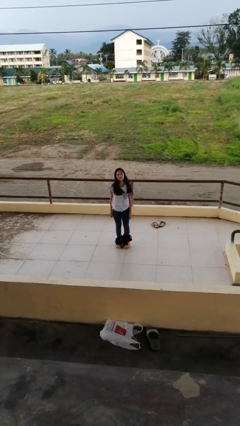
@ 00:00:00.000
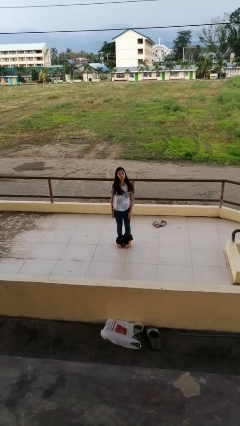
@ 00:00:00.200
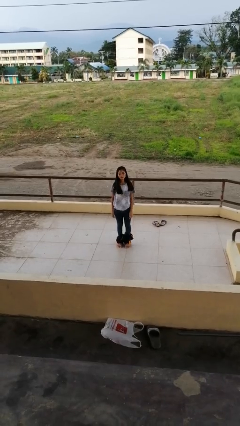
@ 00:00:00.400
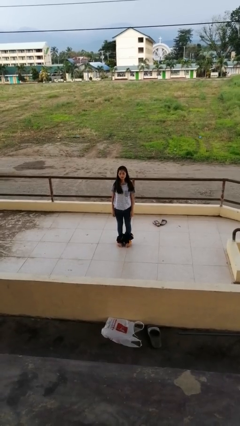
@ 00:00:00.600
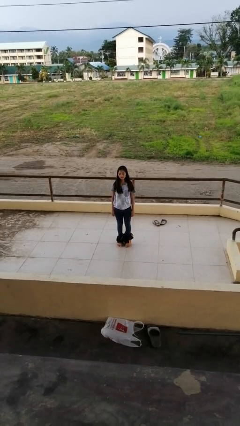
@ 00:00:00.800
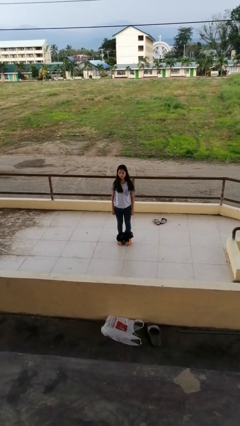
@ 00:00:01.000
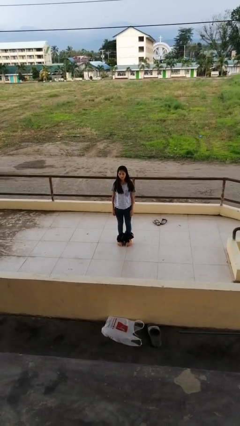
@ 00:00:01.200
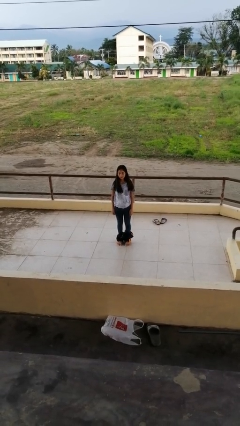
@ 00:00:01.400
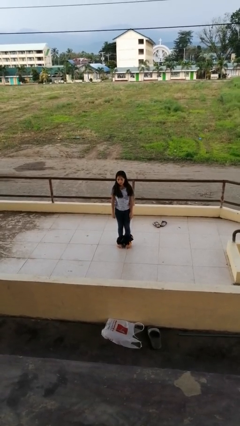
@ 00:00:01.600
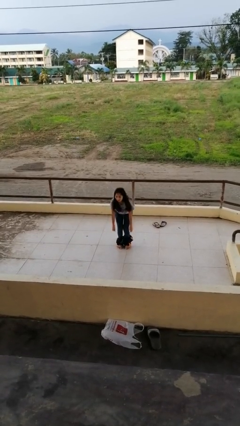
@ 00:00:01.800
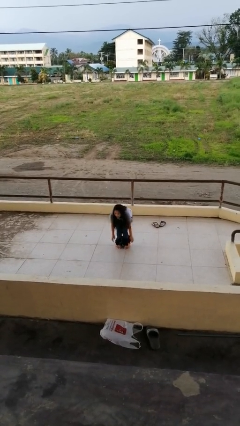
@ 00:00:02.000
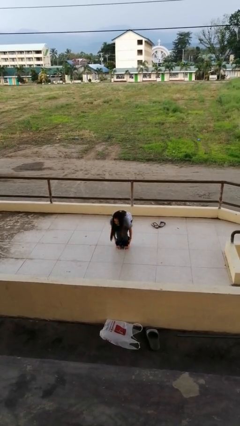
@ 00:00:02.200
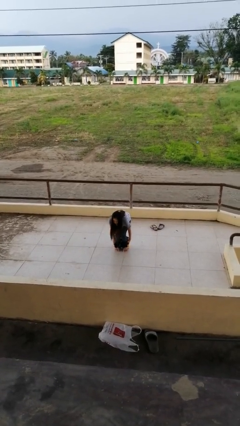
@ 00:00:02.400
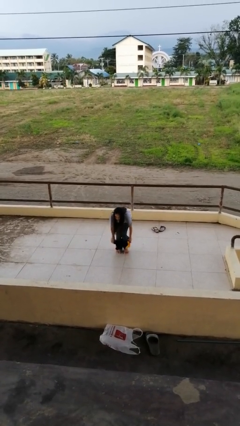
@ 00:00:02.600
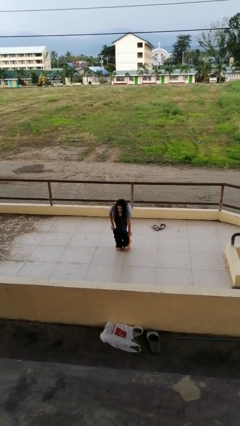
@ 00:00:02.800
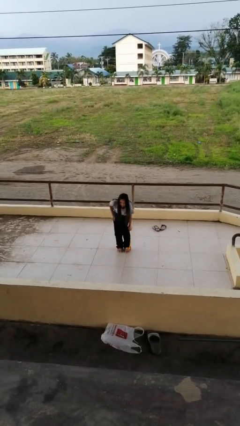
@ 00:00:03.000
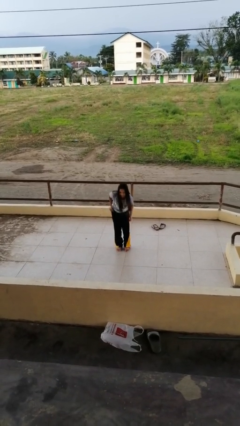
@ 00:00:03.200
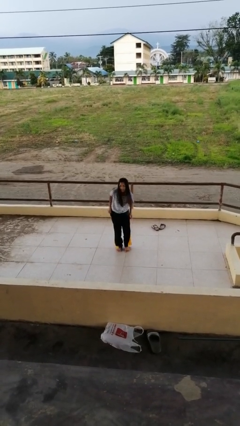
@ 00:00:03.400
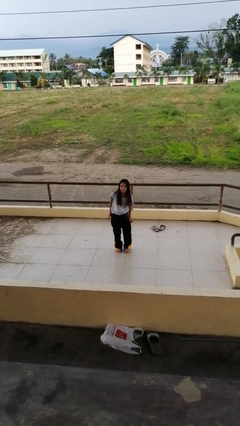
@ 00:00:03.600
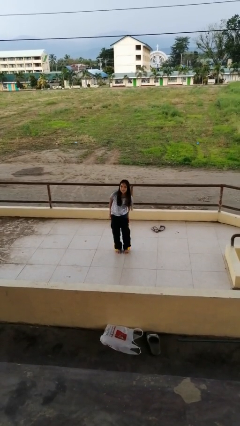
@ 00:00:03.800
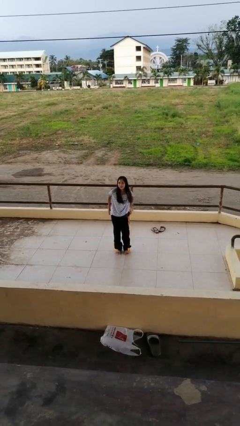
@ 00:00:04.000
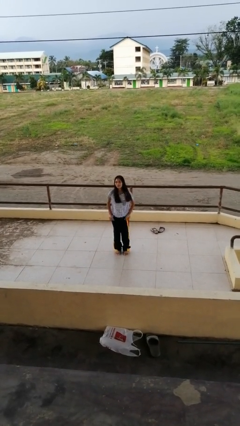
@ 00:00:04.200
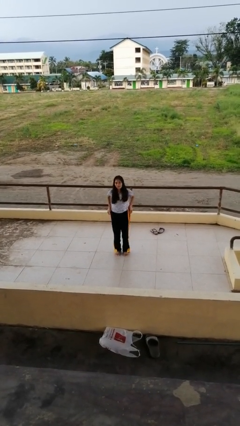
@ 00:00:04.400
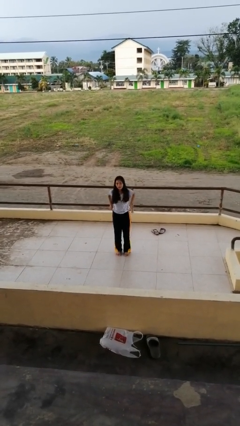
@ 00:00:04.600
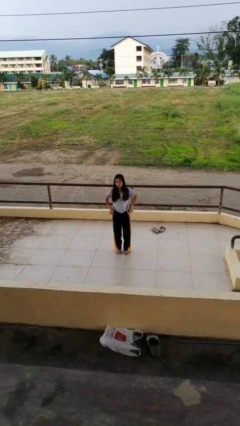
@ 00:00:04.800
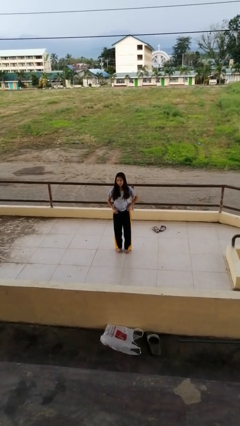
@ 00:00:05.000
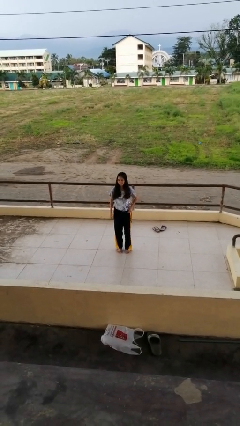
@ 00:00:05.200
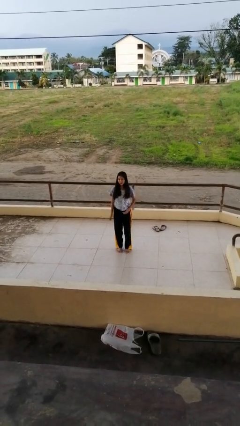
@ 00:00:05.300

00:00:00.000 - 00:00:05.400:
person puts on pants

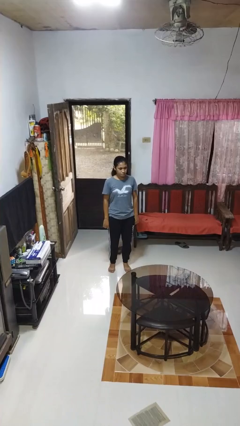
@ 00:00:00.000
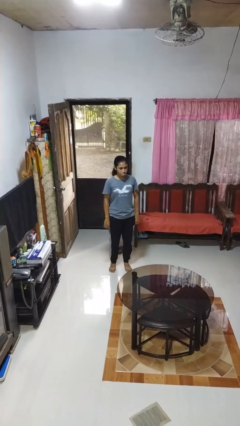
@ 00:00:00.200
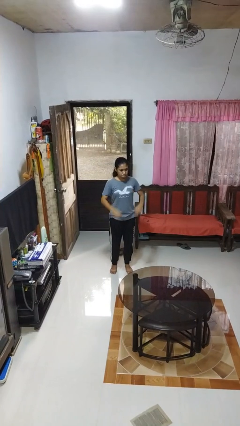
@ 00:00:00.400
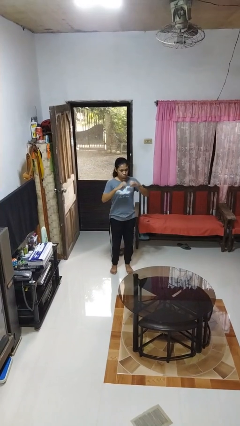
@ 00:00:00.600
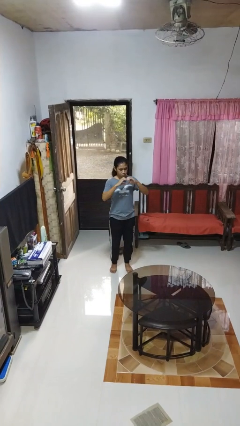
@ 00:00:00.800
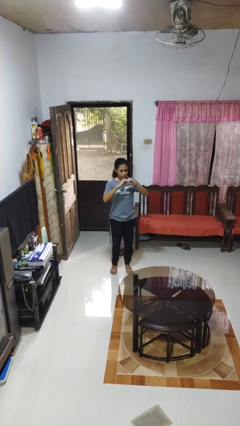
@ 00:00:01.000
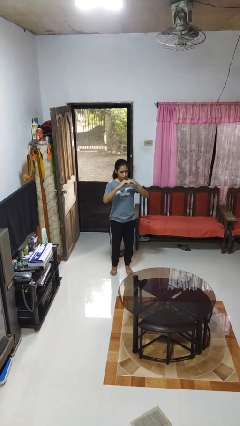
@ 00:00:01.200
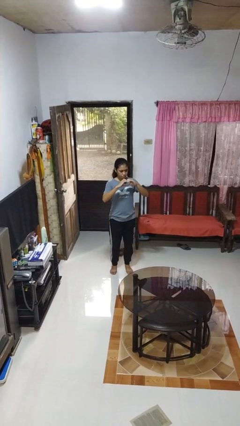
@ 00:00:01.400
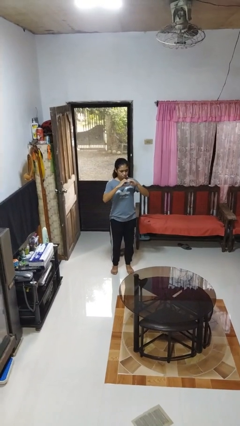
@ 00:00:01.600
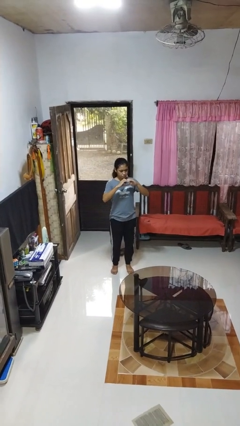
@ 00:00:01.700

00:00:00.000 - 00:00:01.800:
person gestures heart

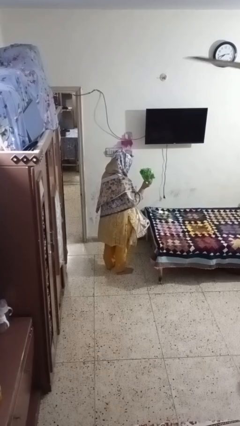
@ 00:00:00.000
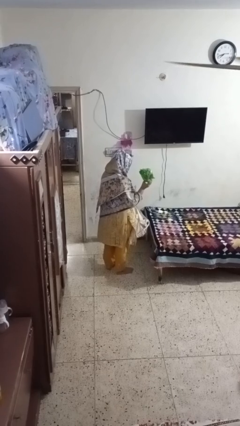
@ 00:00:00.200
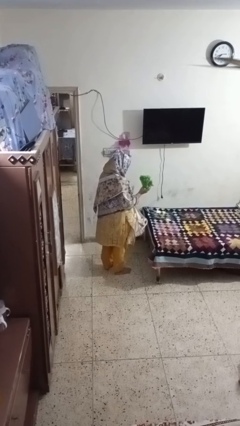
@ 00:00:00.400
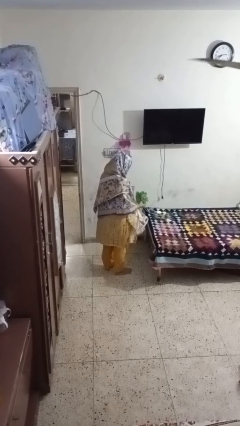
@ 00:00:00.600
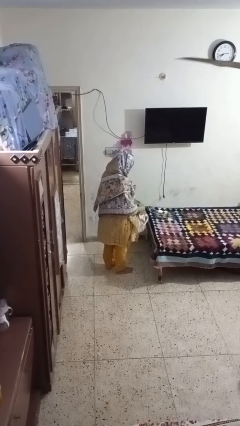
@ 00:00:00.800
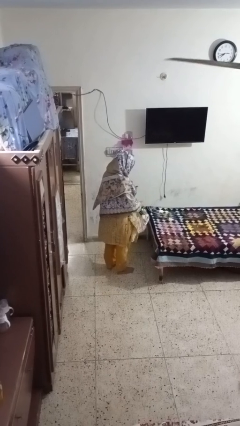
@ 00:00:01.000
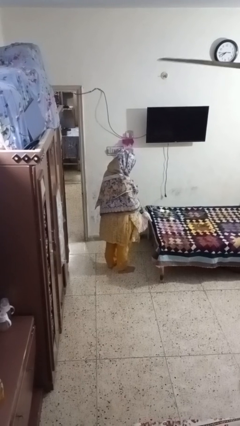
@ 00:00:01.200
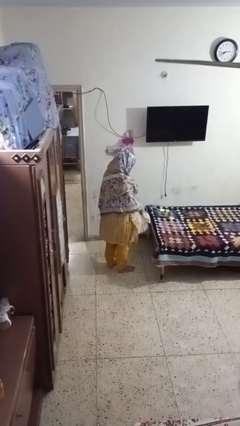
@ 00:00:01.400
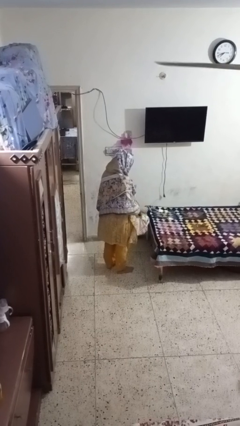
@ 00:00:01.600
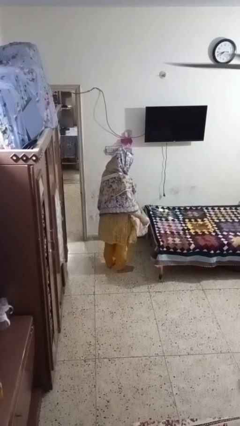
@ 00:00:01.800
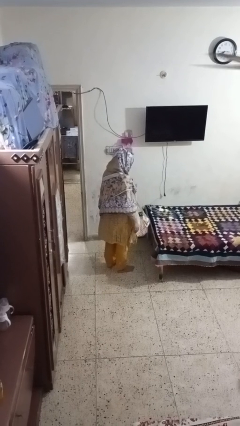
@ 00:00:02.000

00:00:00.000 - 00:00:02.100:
person puts object into bag

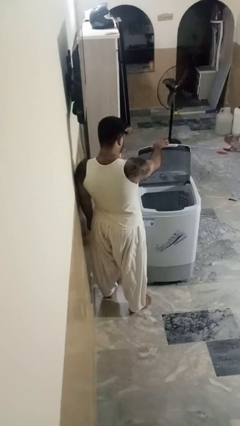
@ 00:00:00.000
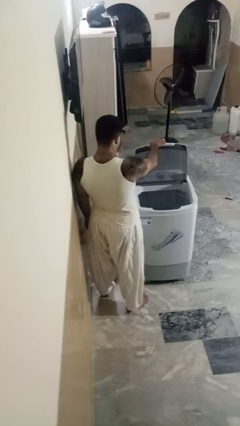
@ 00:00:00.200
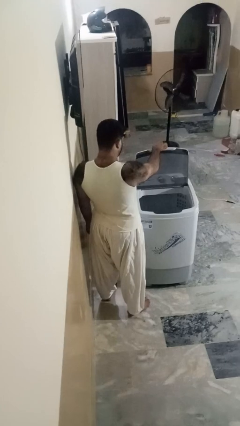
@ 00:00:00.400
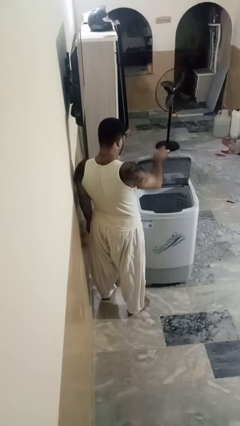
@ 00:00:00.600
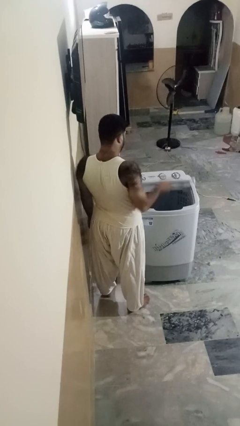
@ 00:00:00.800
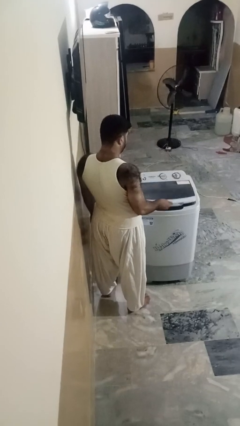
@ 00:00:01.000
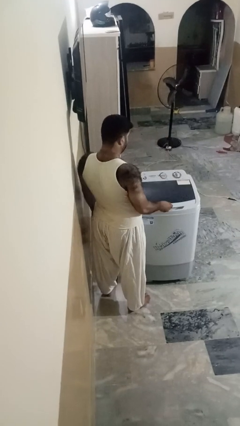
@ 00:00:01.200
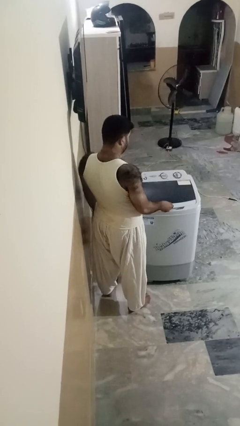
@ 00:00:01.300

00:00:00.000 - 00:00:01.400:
person closes clothes washer

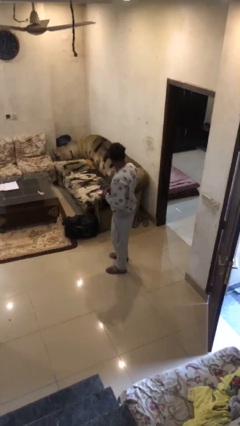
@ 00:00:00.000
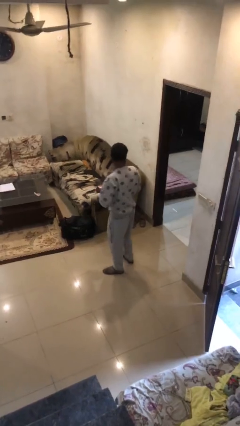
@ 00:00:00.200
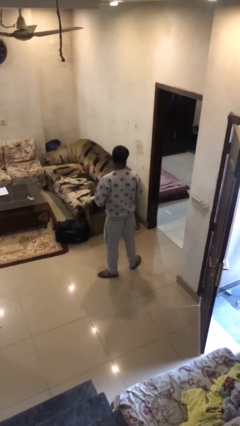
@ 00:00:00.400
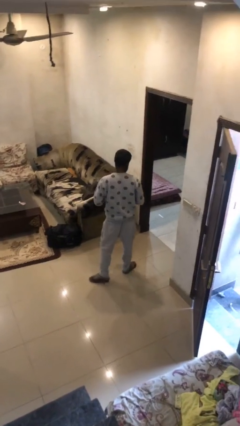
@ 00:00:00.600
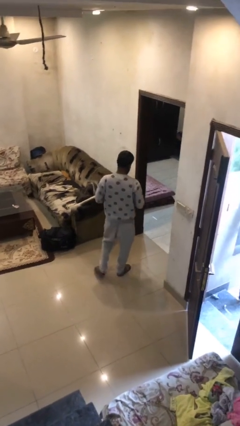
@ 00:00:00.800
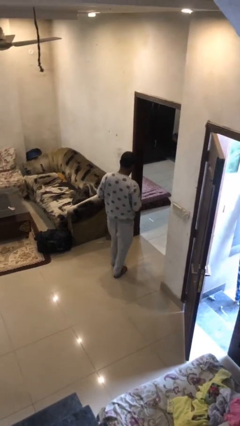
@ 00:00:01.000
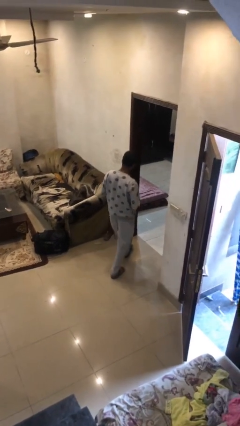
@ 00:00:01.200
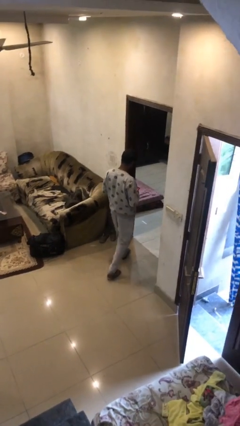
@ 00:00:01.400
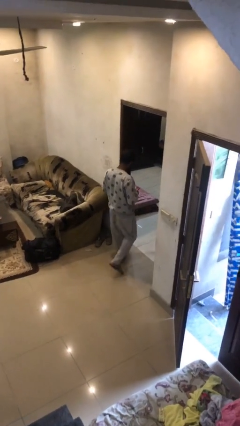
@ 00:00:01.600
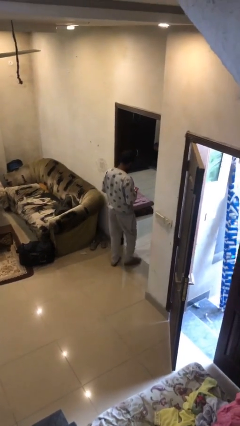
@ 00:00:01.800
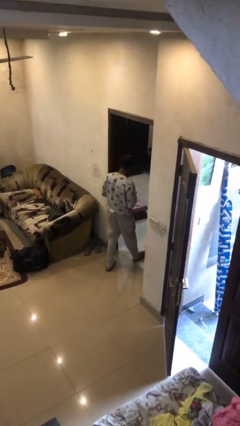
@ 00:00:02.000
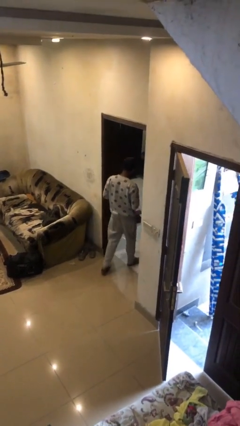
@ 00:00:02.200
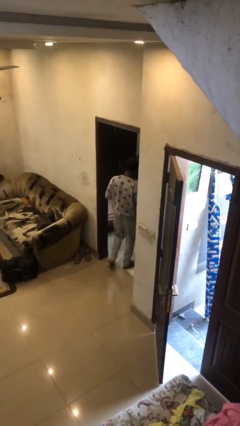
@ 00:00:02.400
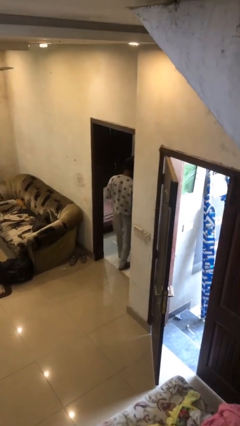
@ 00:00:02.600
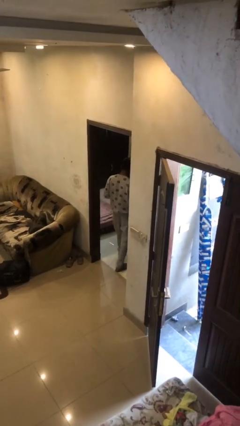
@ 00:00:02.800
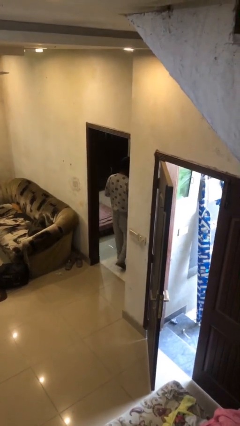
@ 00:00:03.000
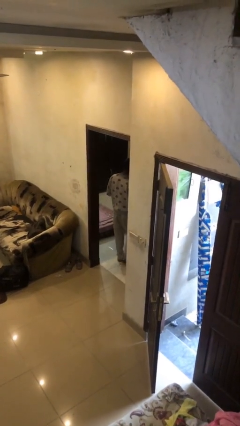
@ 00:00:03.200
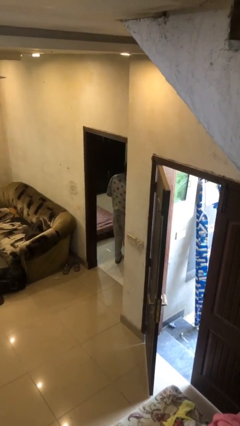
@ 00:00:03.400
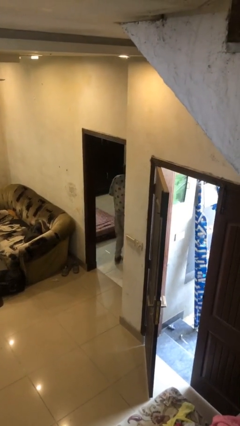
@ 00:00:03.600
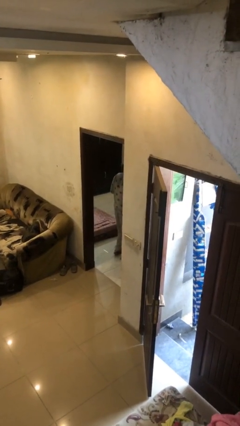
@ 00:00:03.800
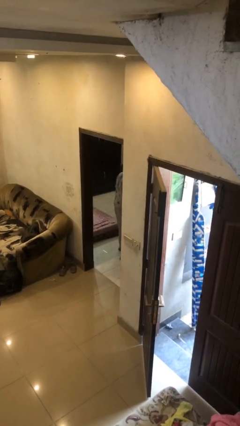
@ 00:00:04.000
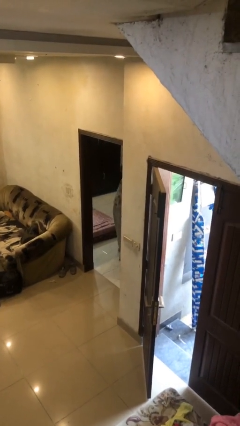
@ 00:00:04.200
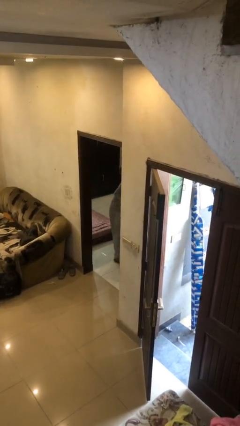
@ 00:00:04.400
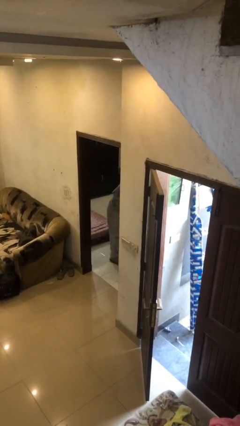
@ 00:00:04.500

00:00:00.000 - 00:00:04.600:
person exits scene through structure

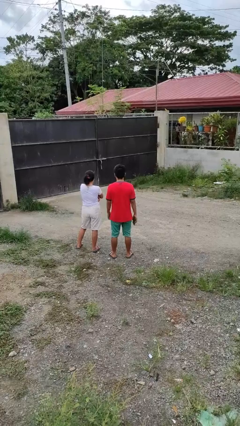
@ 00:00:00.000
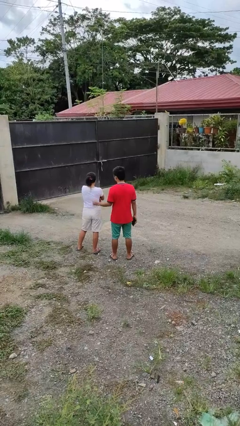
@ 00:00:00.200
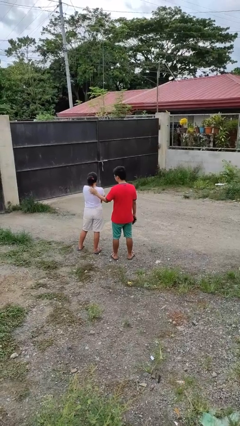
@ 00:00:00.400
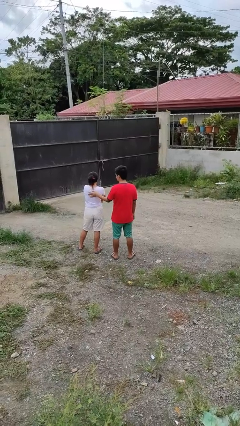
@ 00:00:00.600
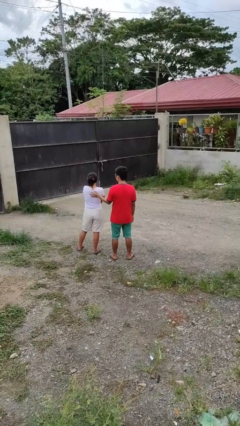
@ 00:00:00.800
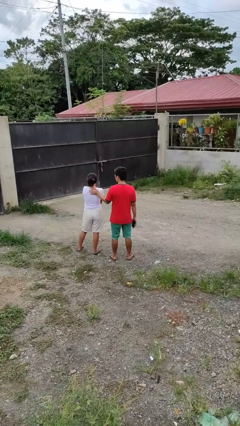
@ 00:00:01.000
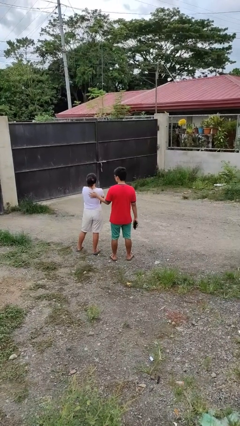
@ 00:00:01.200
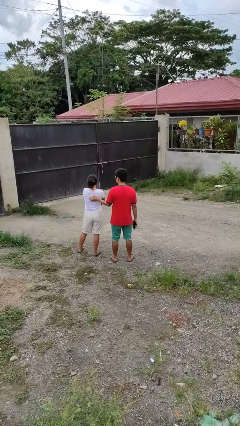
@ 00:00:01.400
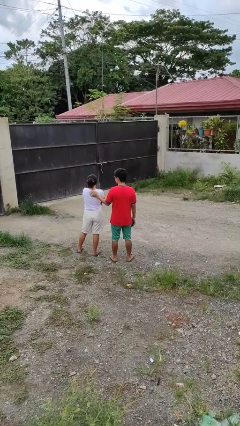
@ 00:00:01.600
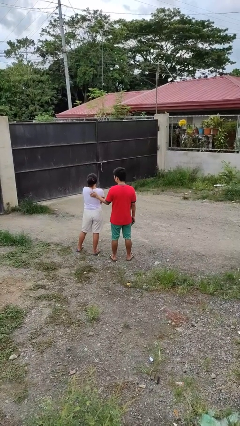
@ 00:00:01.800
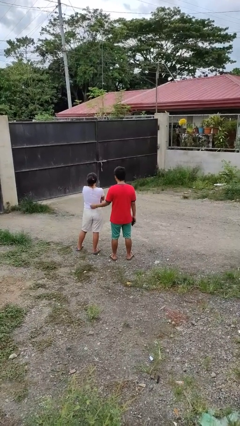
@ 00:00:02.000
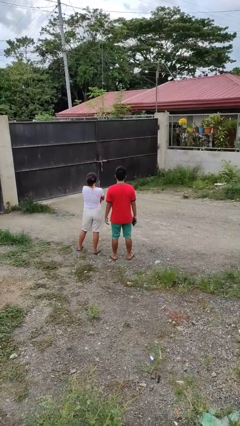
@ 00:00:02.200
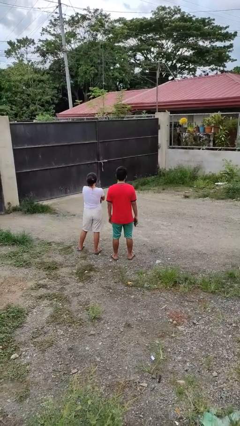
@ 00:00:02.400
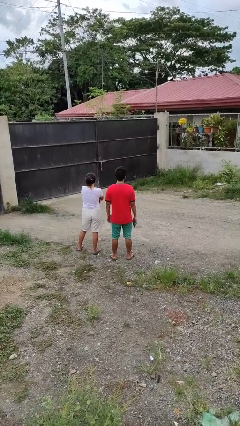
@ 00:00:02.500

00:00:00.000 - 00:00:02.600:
person touches back of person
